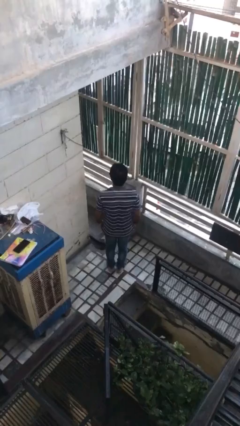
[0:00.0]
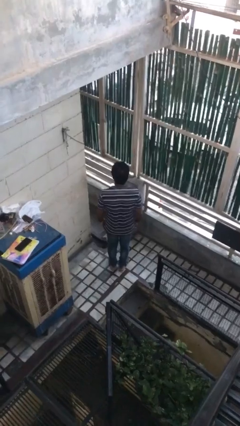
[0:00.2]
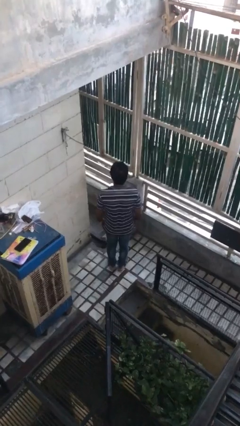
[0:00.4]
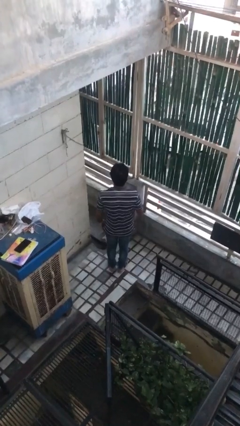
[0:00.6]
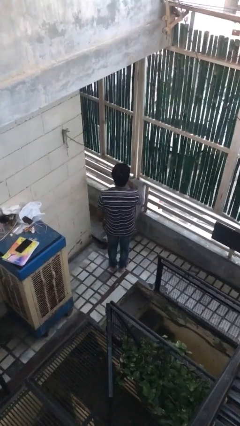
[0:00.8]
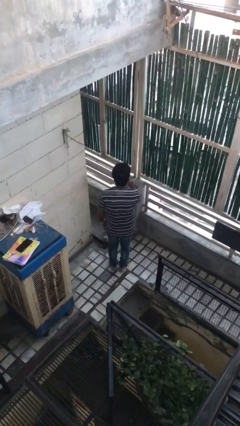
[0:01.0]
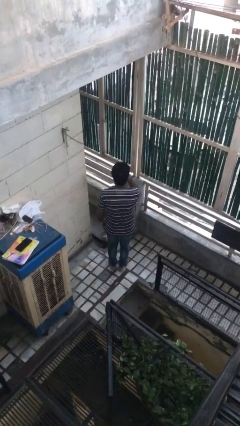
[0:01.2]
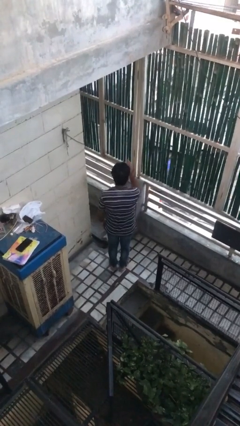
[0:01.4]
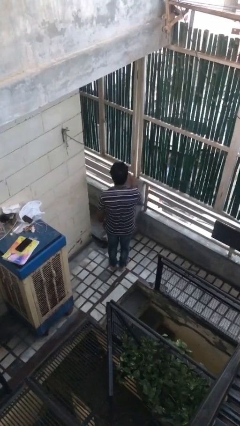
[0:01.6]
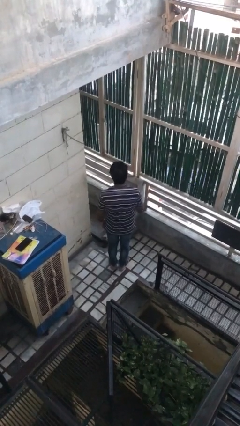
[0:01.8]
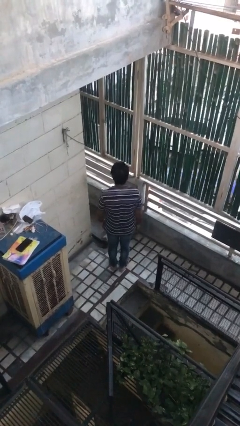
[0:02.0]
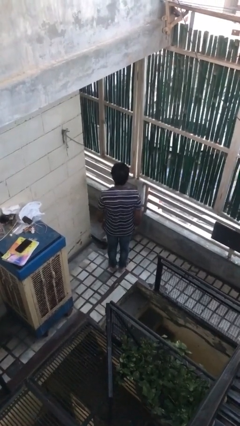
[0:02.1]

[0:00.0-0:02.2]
person gestures blow kiss

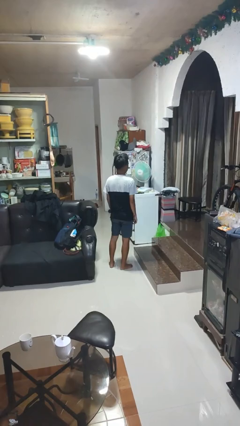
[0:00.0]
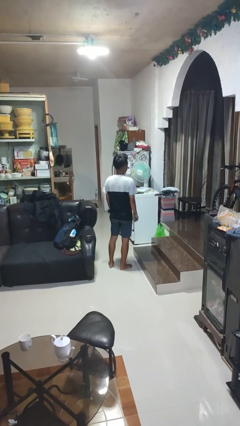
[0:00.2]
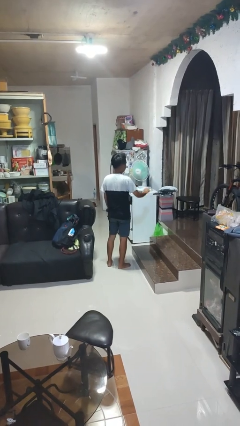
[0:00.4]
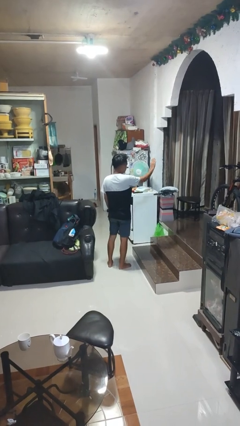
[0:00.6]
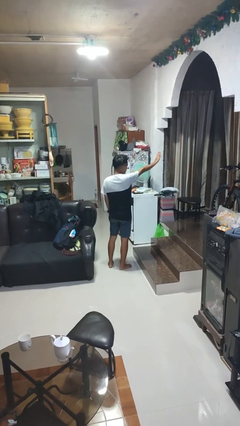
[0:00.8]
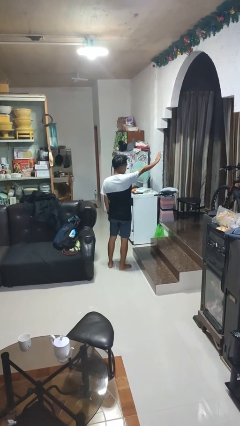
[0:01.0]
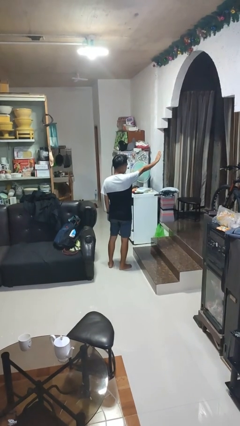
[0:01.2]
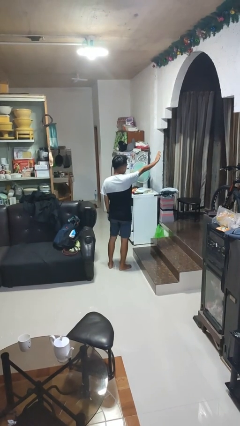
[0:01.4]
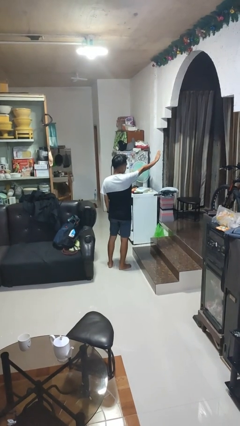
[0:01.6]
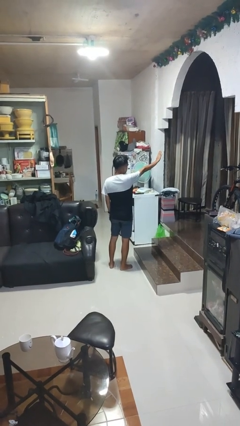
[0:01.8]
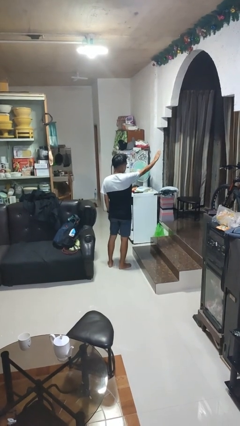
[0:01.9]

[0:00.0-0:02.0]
person gestures stop

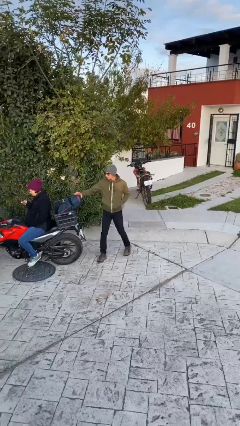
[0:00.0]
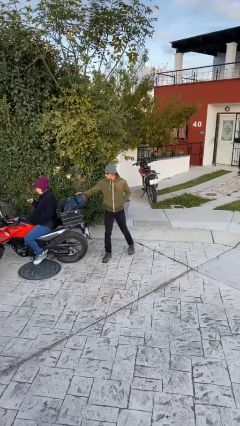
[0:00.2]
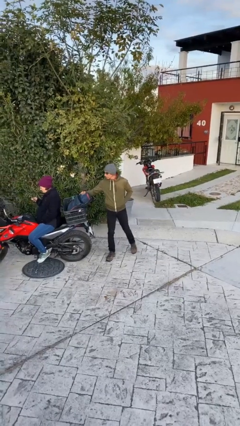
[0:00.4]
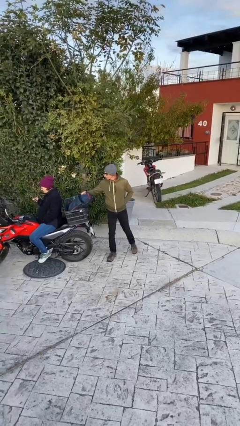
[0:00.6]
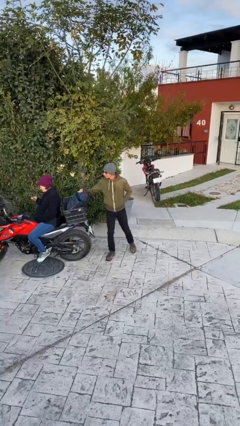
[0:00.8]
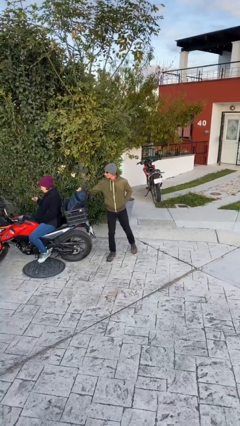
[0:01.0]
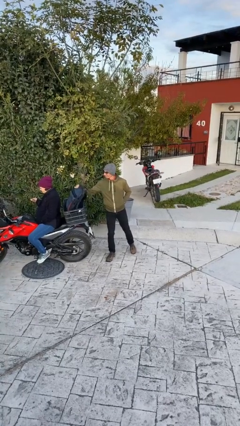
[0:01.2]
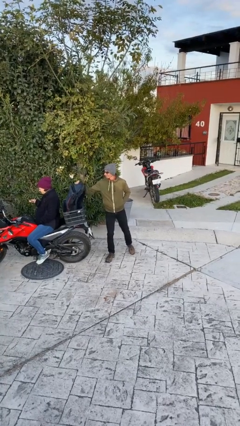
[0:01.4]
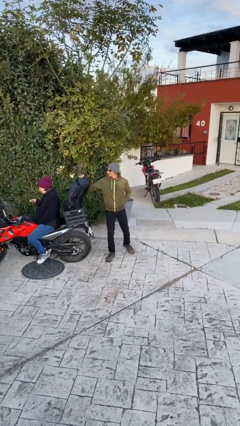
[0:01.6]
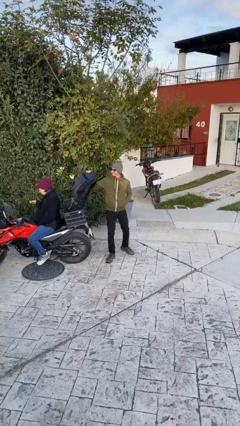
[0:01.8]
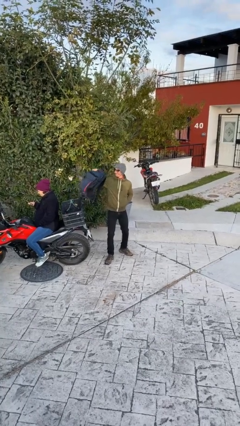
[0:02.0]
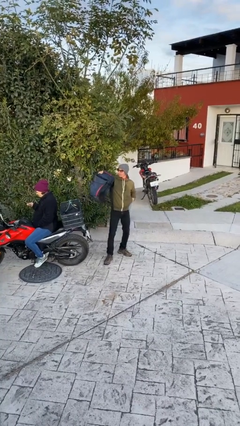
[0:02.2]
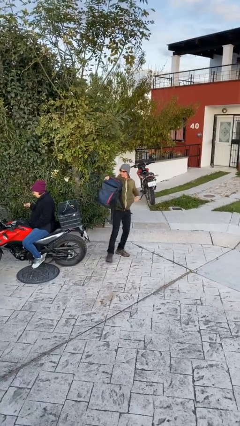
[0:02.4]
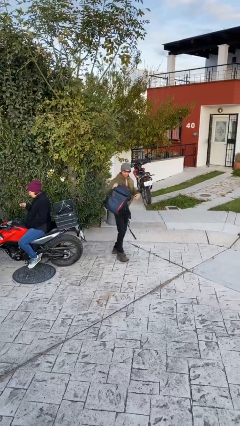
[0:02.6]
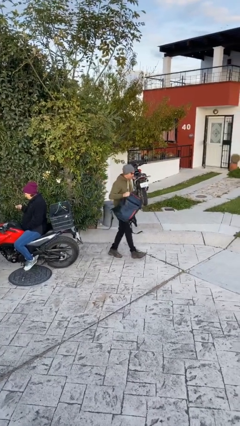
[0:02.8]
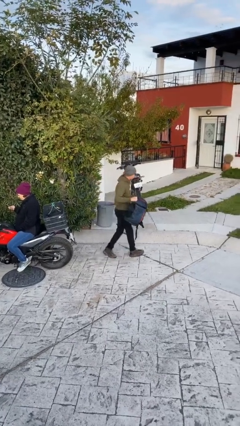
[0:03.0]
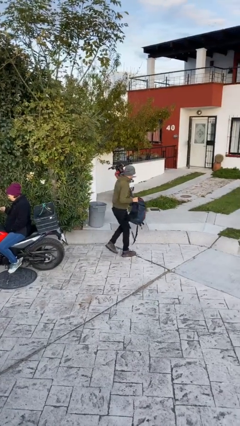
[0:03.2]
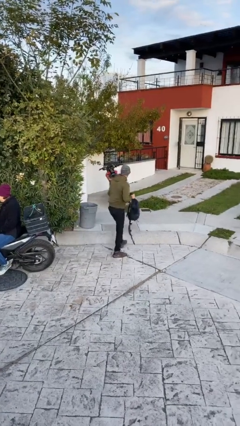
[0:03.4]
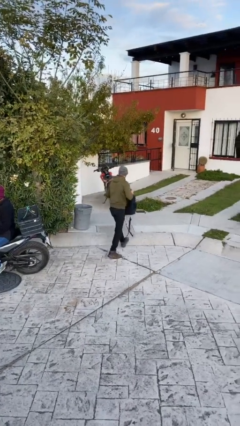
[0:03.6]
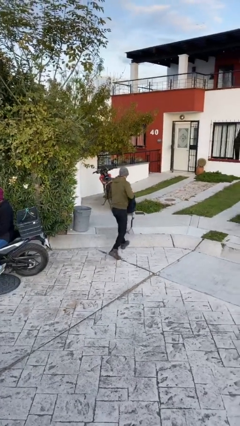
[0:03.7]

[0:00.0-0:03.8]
person steals object from person

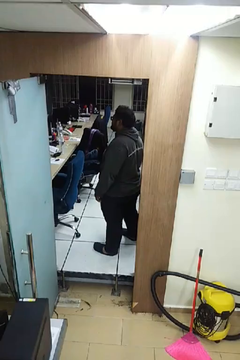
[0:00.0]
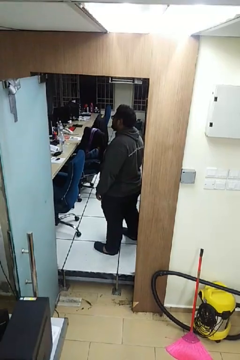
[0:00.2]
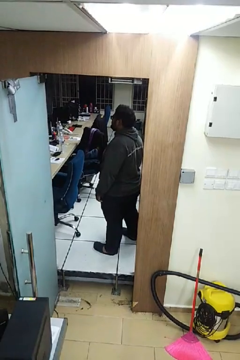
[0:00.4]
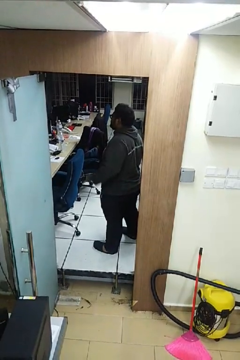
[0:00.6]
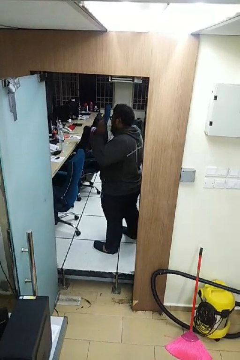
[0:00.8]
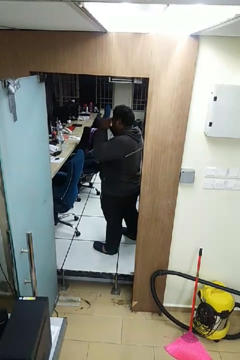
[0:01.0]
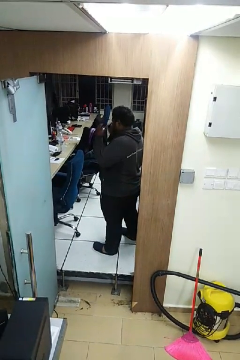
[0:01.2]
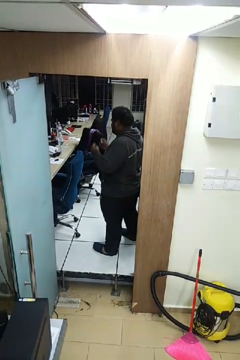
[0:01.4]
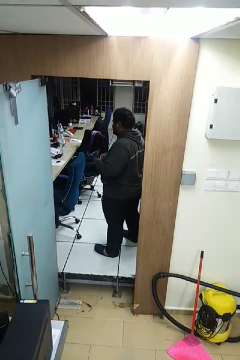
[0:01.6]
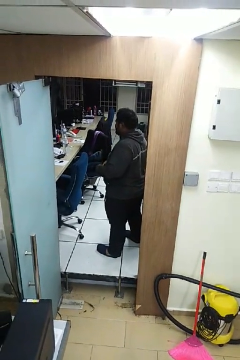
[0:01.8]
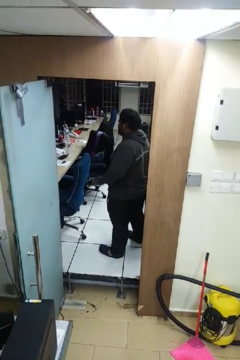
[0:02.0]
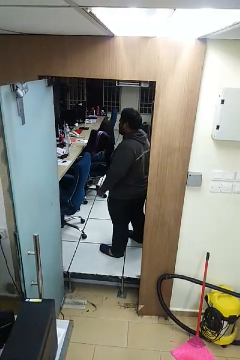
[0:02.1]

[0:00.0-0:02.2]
person takes off glasses

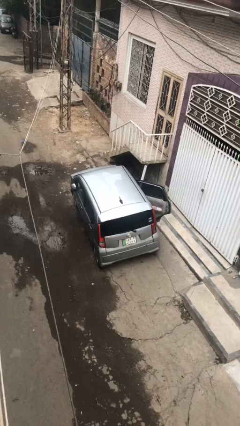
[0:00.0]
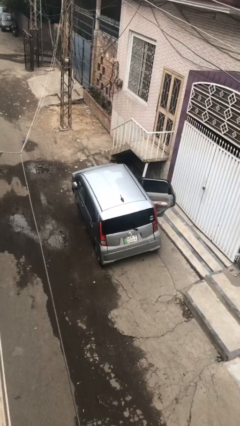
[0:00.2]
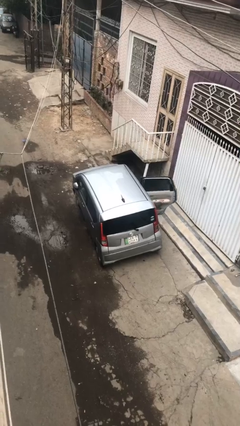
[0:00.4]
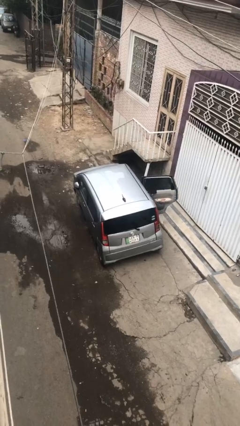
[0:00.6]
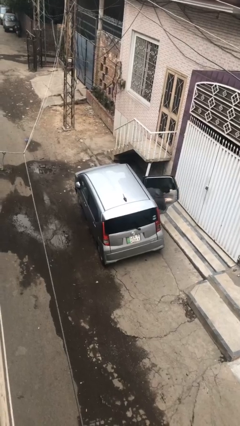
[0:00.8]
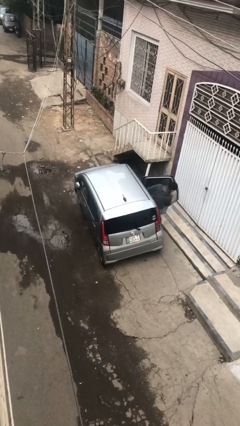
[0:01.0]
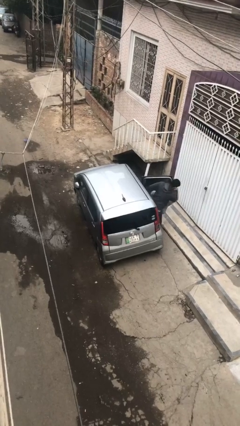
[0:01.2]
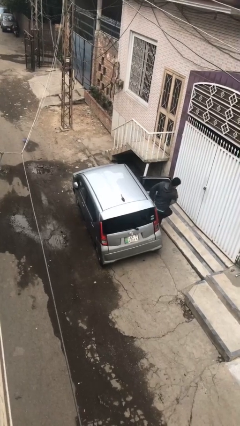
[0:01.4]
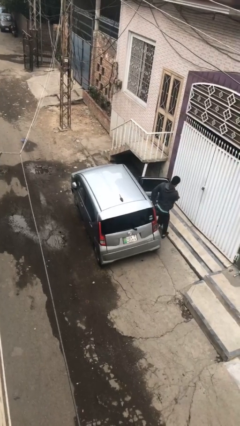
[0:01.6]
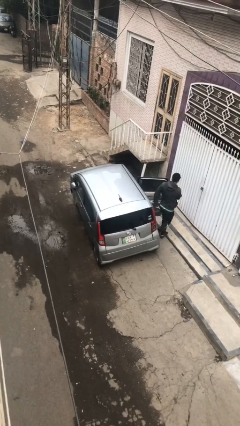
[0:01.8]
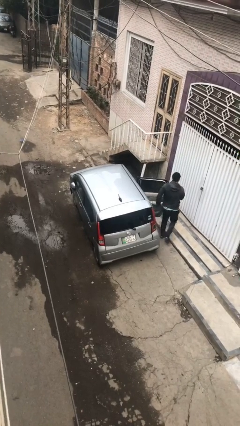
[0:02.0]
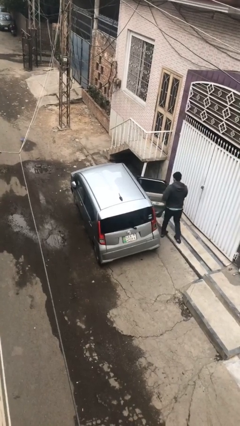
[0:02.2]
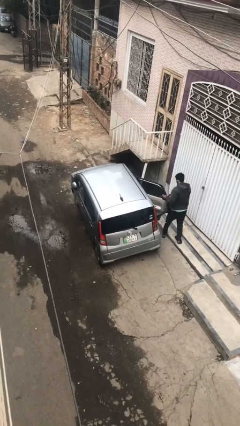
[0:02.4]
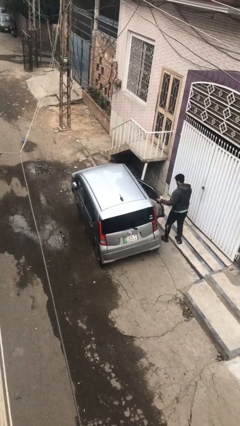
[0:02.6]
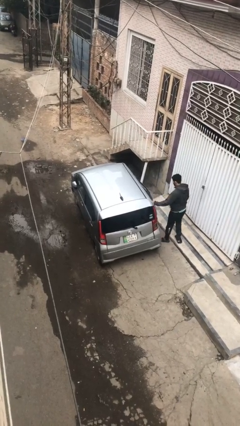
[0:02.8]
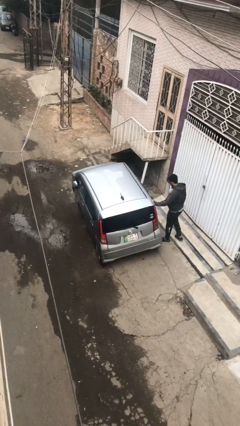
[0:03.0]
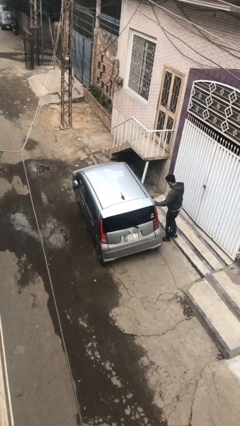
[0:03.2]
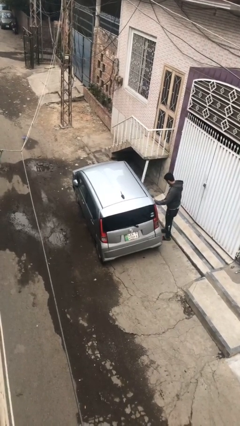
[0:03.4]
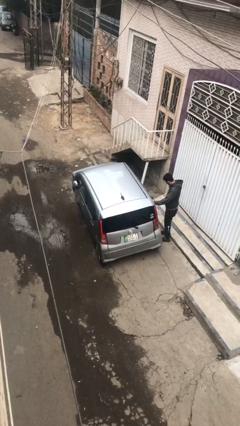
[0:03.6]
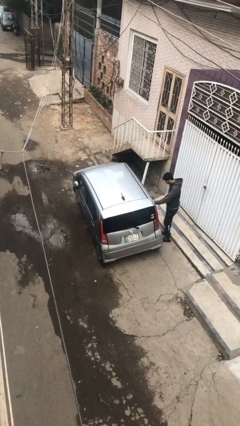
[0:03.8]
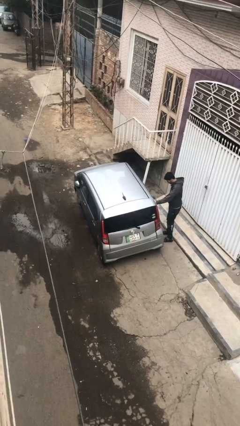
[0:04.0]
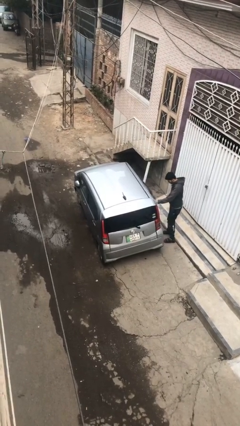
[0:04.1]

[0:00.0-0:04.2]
car drops off person

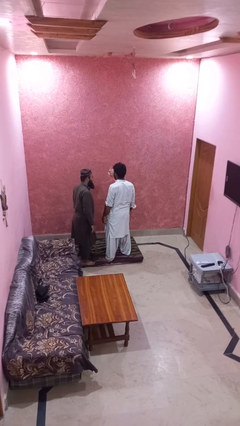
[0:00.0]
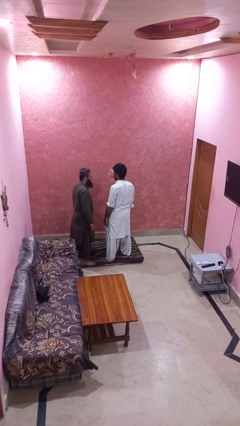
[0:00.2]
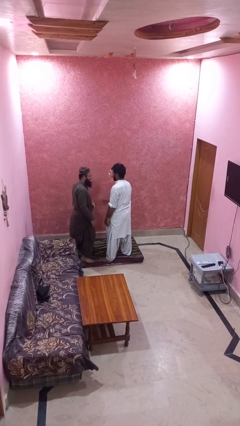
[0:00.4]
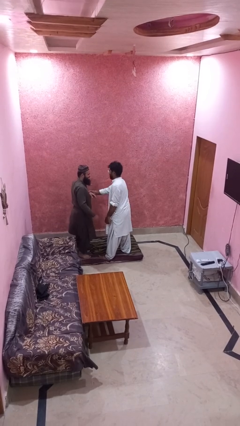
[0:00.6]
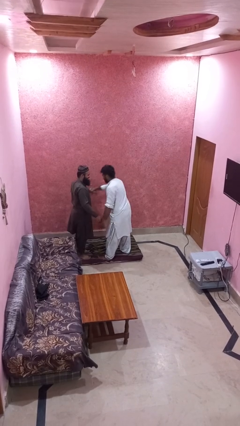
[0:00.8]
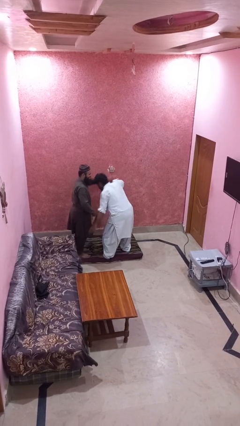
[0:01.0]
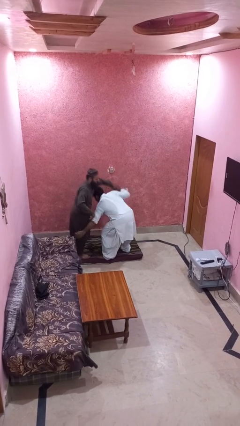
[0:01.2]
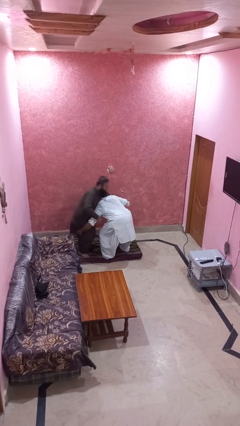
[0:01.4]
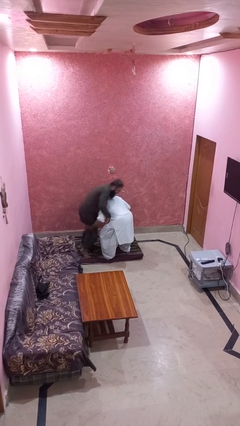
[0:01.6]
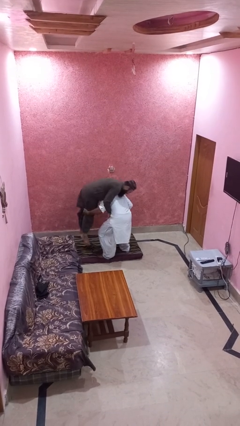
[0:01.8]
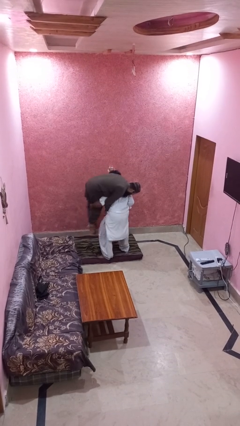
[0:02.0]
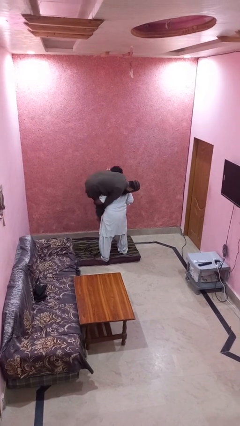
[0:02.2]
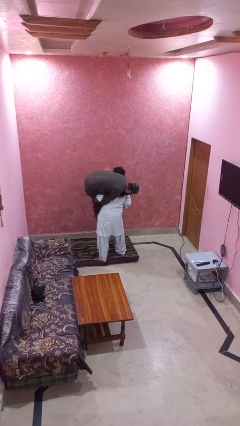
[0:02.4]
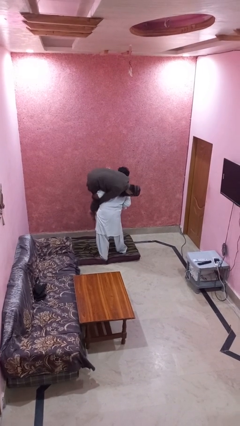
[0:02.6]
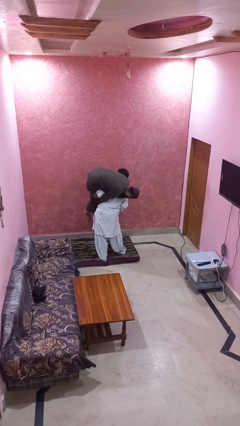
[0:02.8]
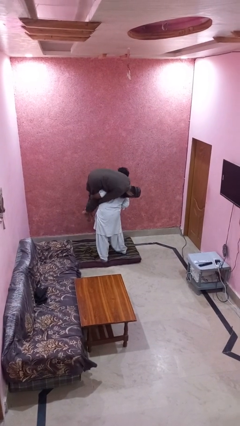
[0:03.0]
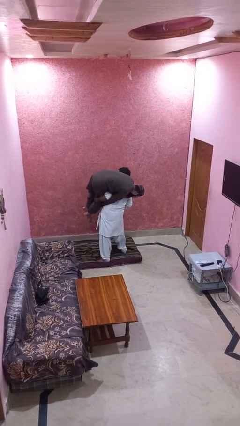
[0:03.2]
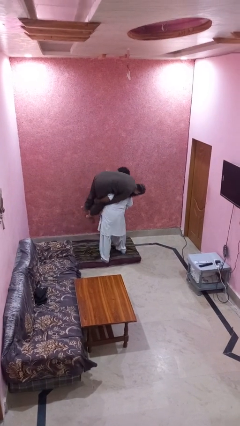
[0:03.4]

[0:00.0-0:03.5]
person carries person over shoulder
